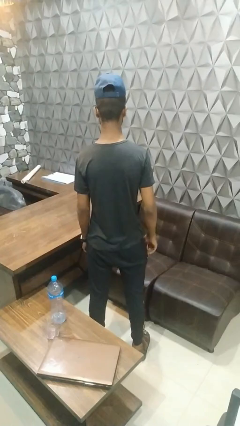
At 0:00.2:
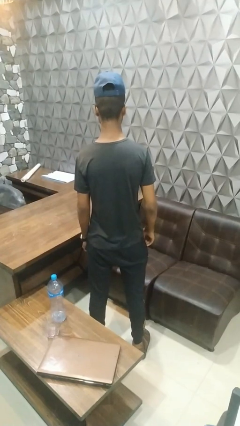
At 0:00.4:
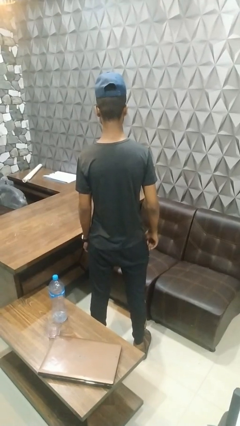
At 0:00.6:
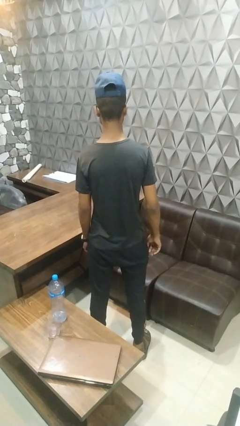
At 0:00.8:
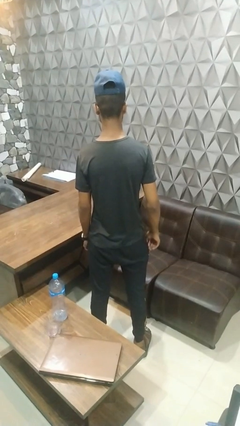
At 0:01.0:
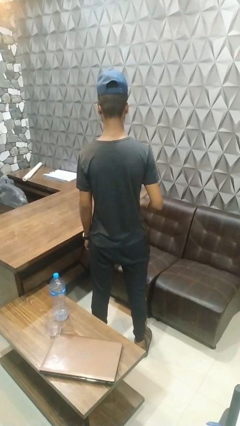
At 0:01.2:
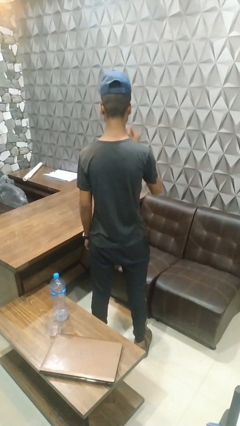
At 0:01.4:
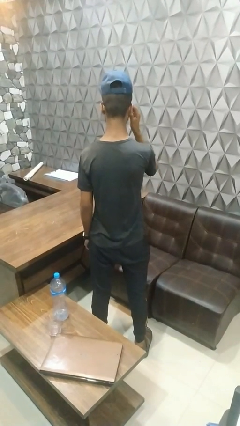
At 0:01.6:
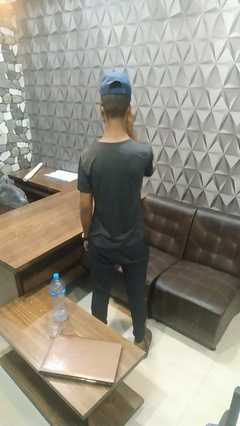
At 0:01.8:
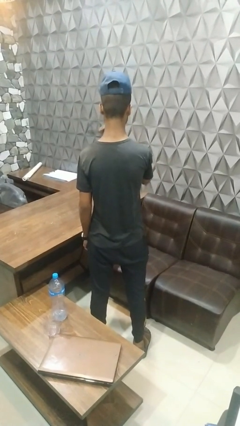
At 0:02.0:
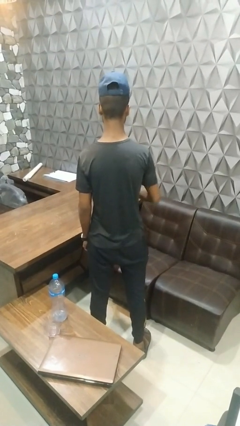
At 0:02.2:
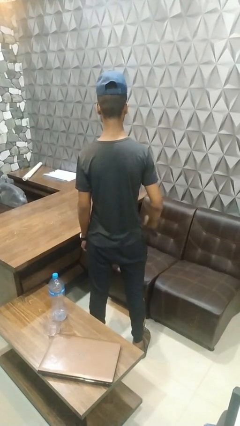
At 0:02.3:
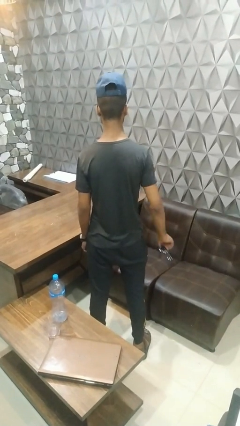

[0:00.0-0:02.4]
person takes off sunglasses

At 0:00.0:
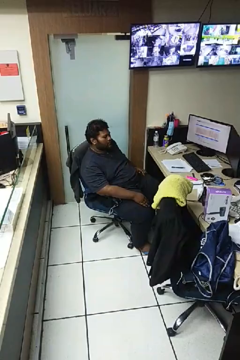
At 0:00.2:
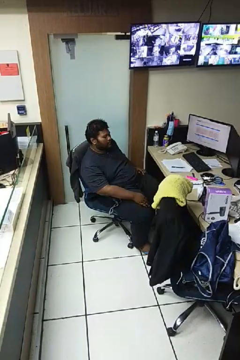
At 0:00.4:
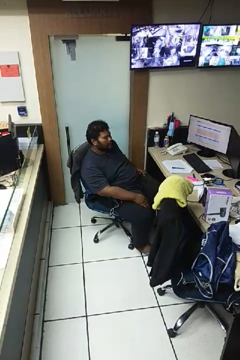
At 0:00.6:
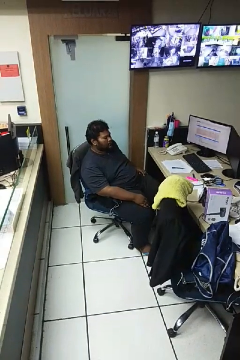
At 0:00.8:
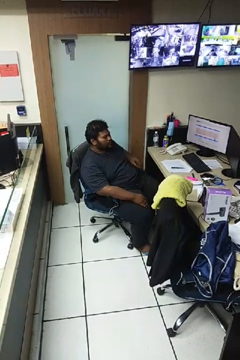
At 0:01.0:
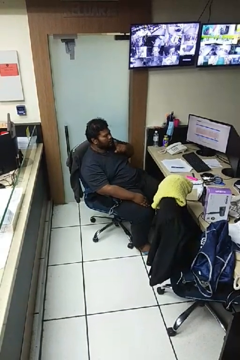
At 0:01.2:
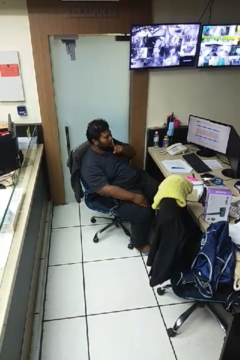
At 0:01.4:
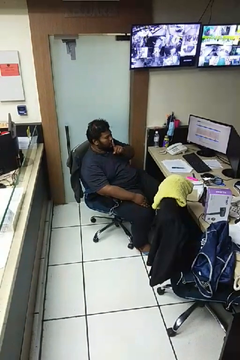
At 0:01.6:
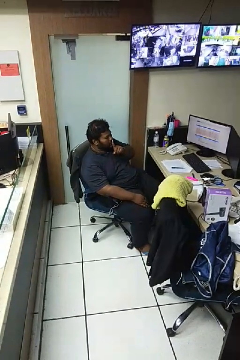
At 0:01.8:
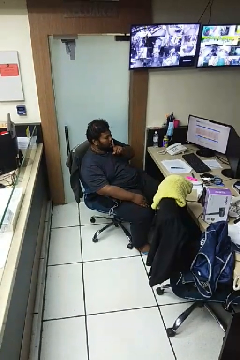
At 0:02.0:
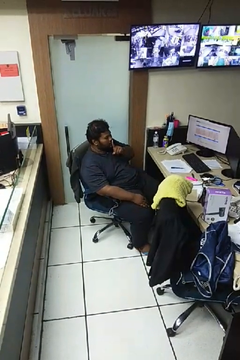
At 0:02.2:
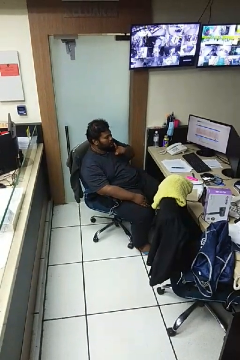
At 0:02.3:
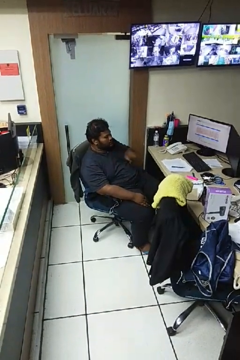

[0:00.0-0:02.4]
person gestures be quiet

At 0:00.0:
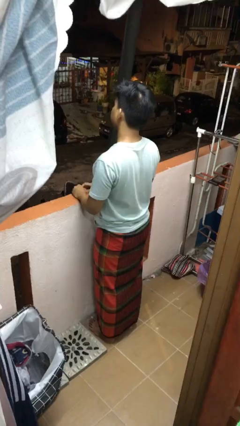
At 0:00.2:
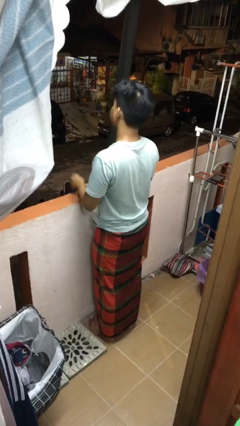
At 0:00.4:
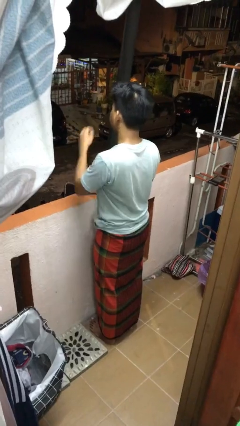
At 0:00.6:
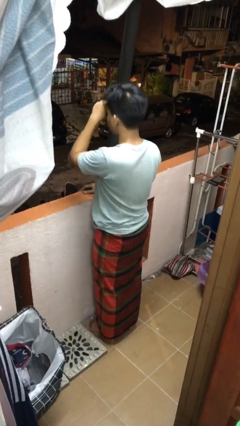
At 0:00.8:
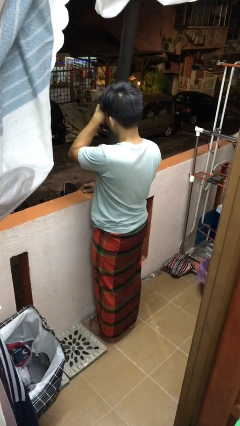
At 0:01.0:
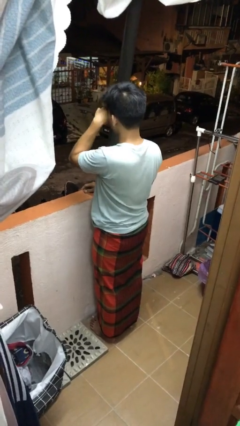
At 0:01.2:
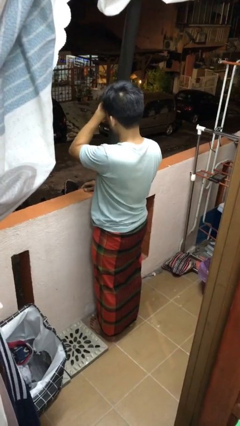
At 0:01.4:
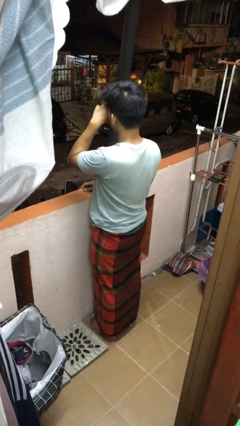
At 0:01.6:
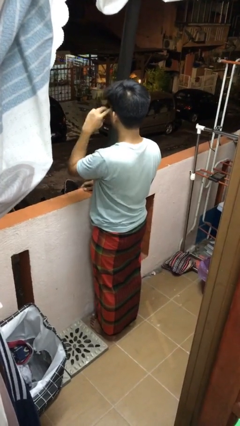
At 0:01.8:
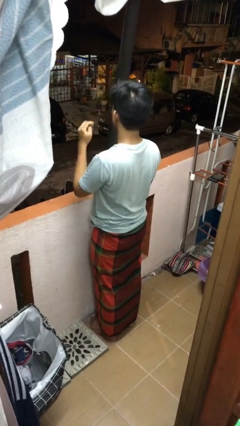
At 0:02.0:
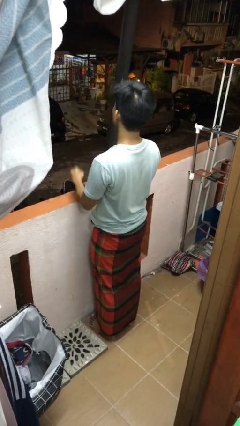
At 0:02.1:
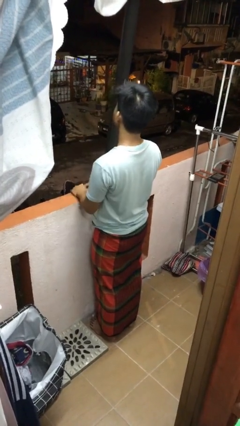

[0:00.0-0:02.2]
person rubs eyes

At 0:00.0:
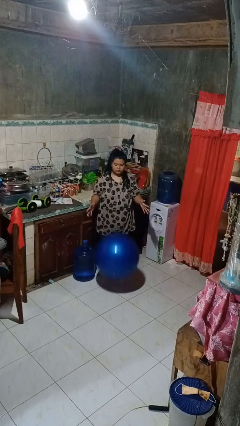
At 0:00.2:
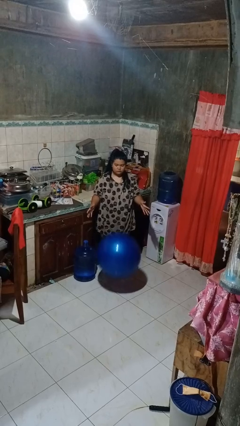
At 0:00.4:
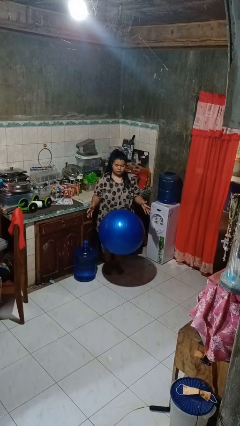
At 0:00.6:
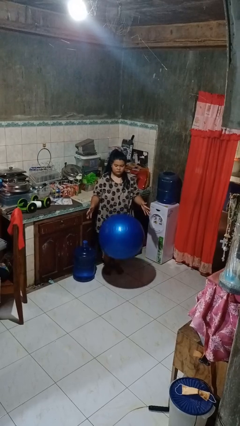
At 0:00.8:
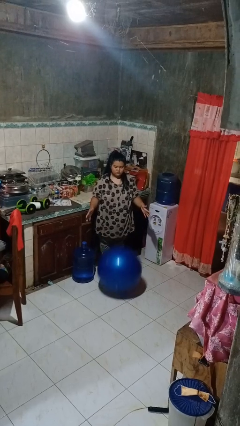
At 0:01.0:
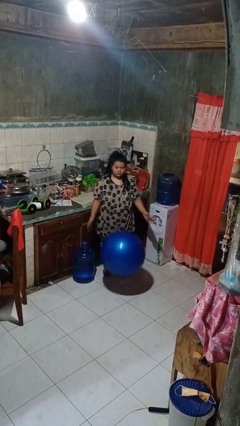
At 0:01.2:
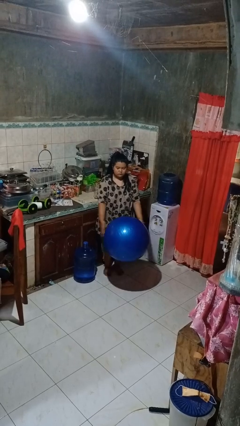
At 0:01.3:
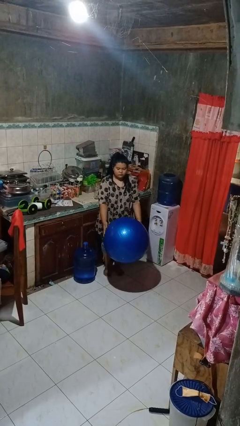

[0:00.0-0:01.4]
person bounces ball on floor

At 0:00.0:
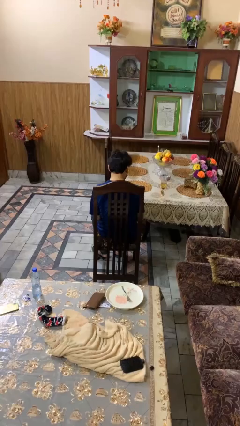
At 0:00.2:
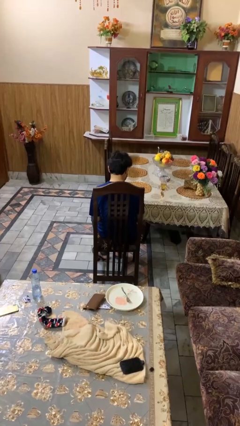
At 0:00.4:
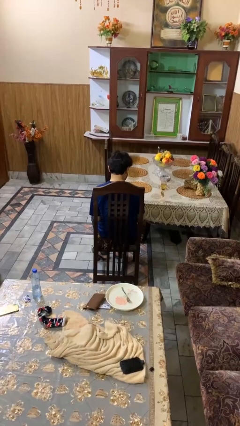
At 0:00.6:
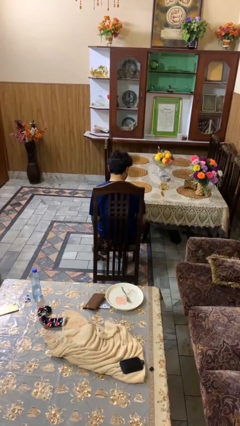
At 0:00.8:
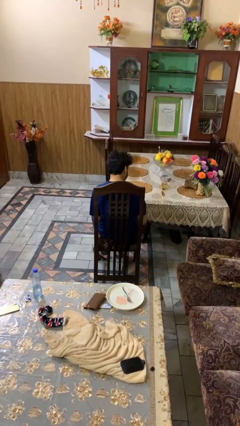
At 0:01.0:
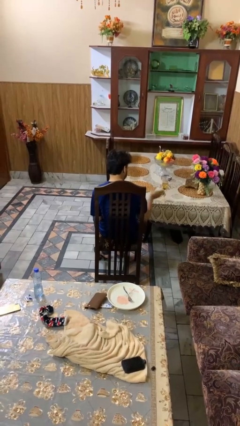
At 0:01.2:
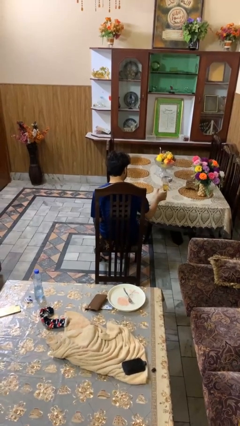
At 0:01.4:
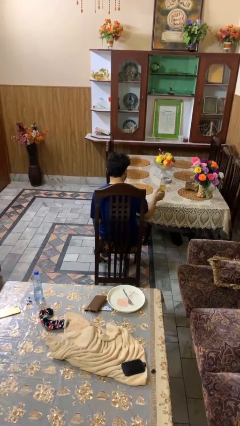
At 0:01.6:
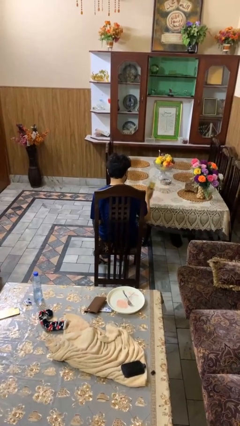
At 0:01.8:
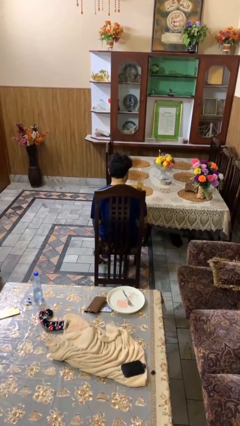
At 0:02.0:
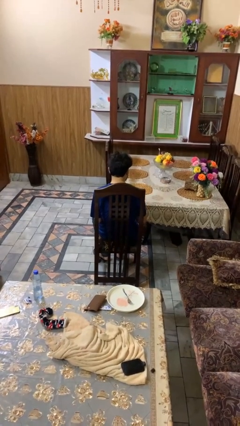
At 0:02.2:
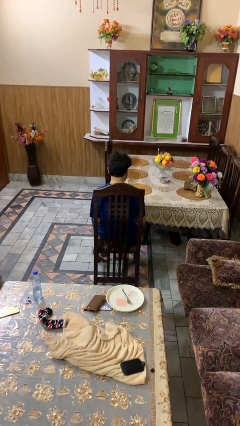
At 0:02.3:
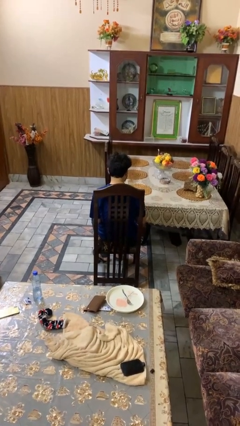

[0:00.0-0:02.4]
person picks up object from table

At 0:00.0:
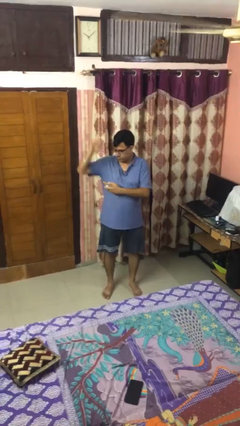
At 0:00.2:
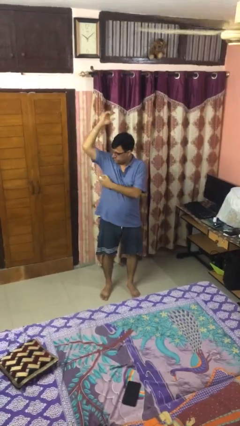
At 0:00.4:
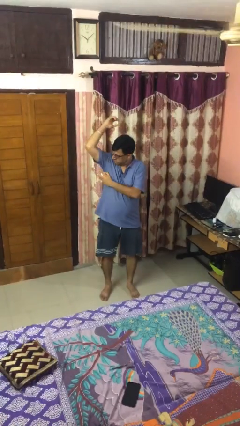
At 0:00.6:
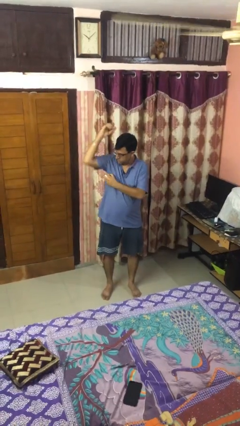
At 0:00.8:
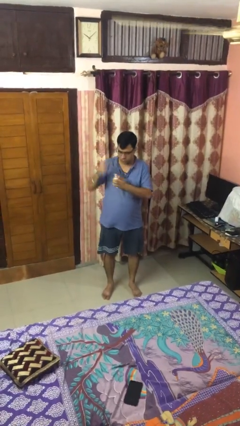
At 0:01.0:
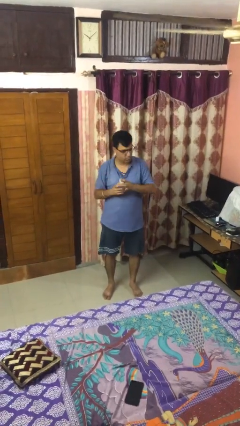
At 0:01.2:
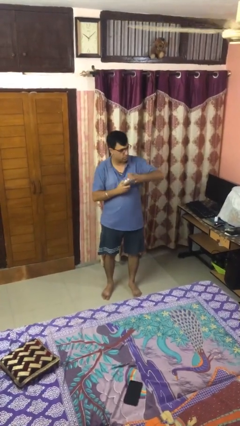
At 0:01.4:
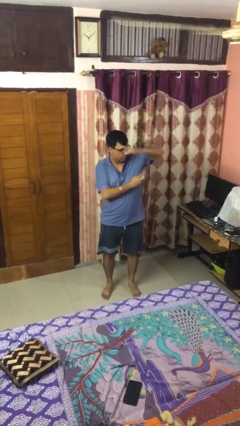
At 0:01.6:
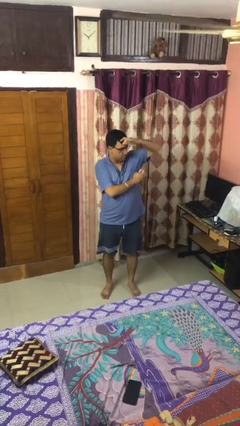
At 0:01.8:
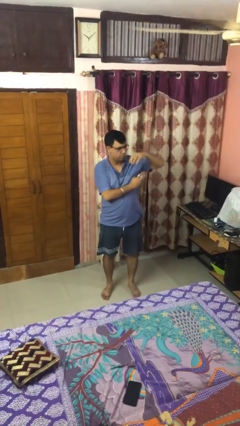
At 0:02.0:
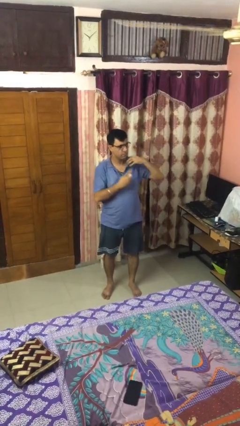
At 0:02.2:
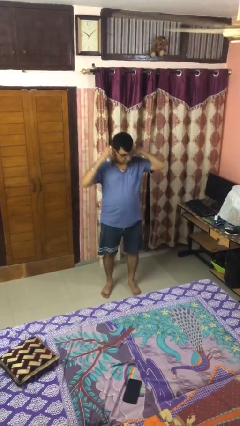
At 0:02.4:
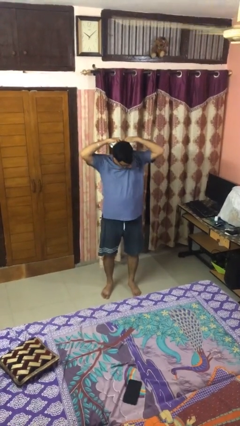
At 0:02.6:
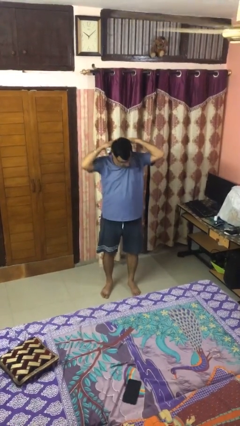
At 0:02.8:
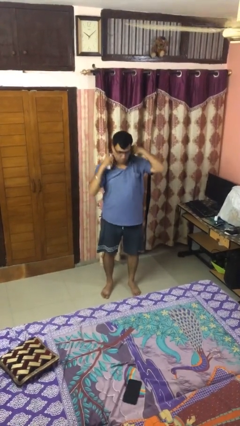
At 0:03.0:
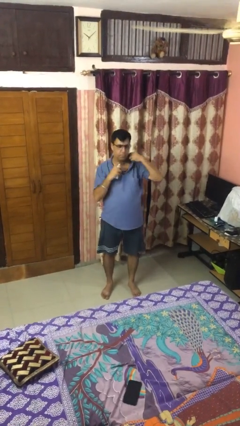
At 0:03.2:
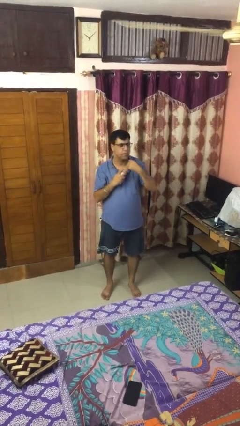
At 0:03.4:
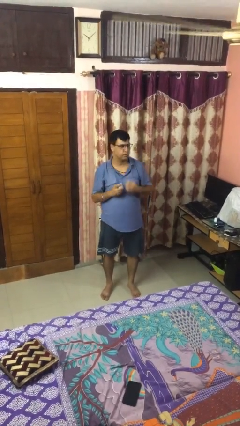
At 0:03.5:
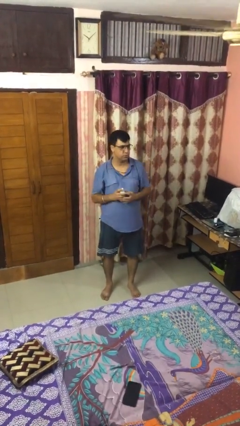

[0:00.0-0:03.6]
person applies deodorant

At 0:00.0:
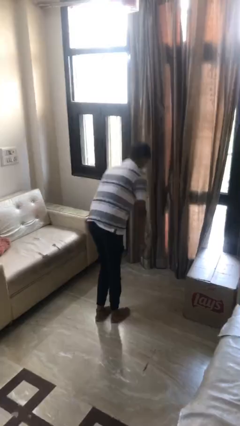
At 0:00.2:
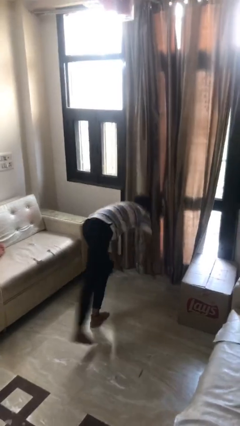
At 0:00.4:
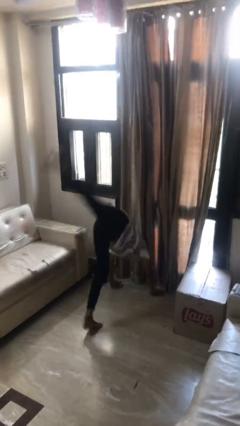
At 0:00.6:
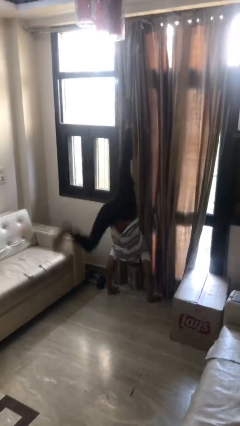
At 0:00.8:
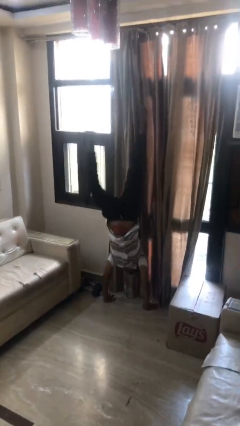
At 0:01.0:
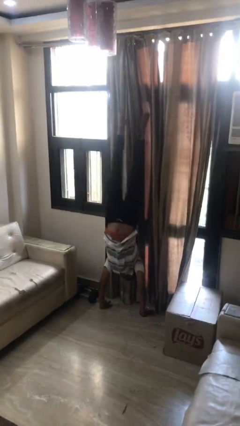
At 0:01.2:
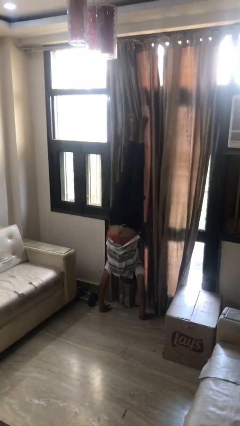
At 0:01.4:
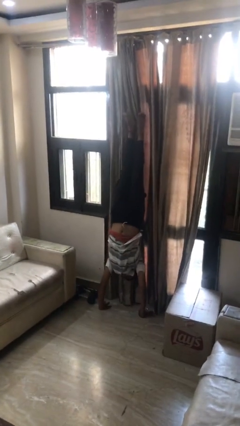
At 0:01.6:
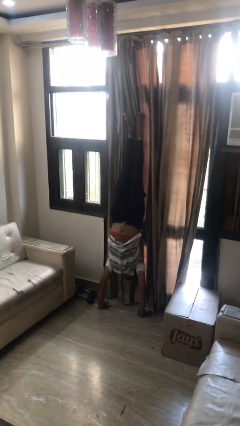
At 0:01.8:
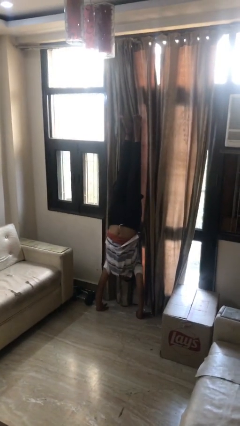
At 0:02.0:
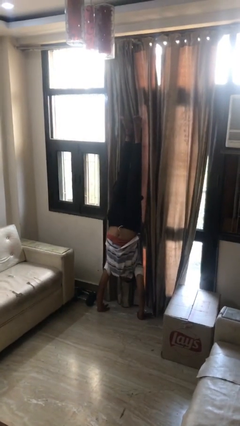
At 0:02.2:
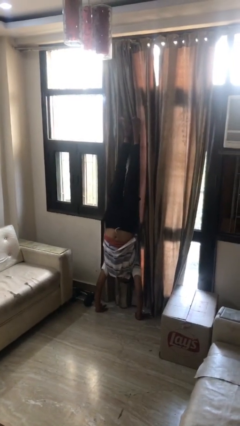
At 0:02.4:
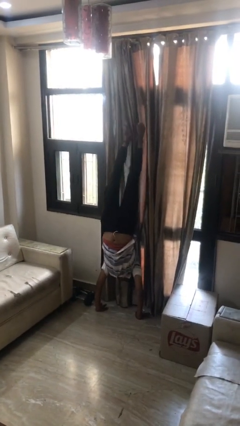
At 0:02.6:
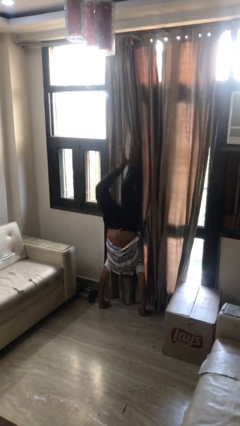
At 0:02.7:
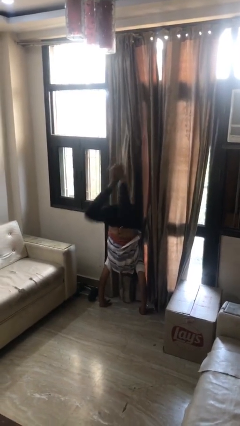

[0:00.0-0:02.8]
person handstand

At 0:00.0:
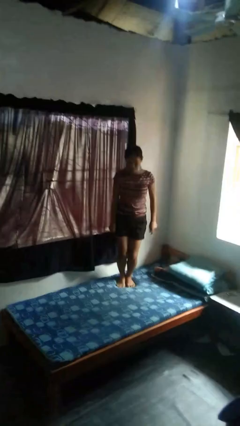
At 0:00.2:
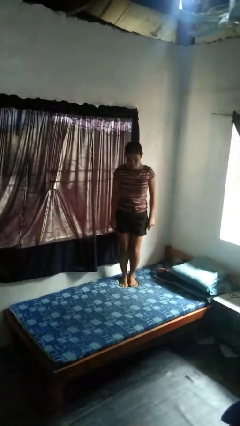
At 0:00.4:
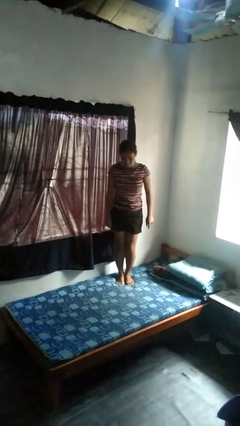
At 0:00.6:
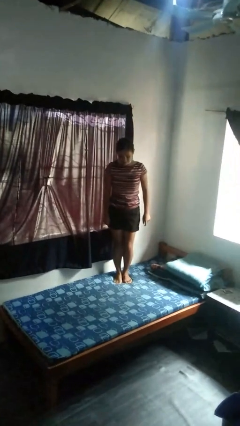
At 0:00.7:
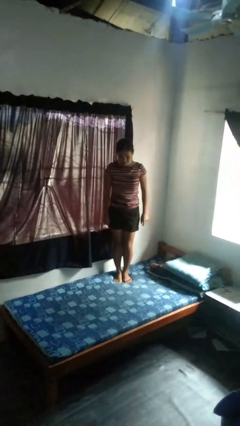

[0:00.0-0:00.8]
person jumps on bed
